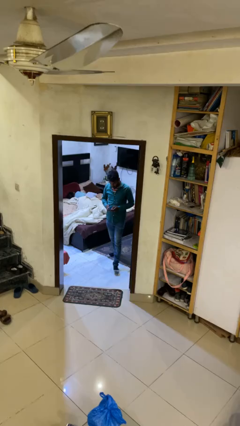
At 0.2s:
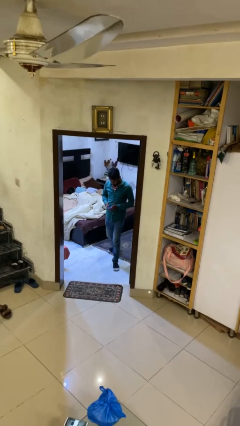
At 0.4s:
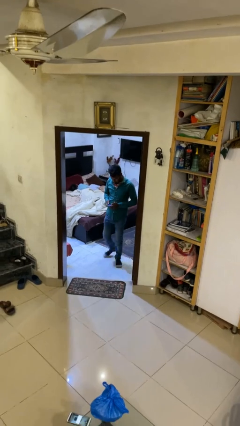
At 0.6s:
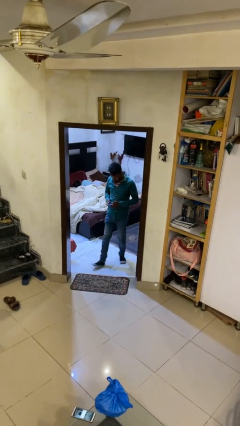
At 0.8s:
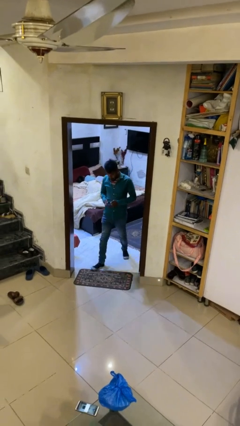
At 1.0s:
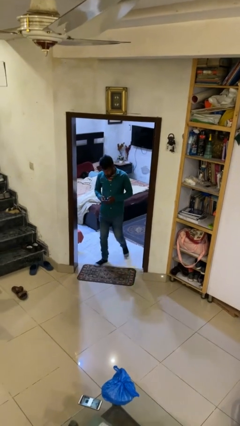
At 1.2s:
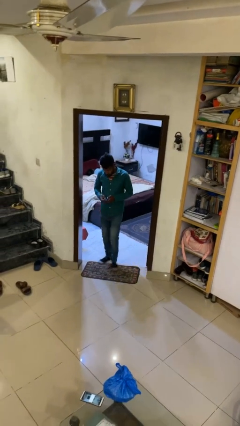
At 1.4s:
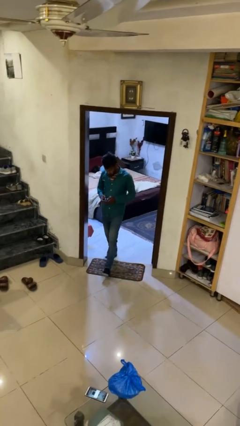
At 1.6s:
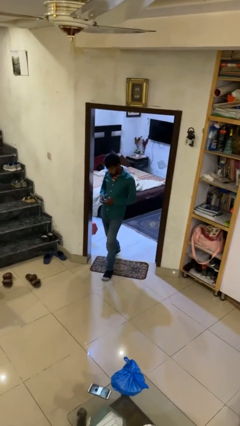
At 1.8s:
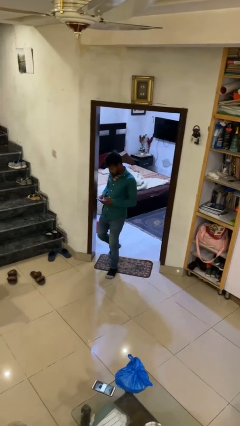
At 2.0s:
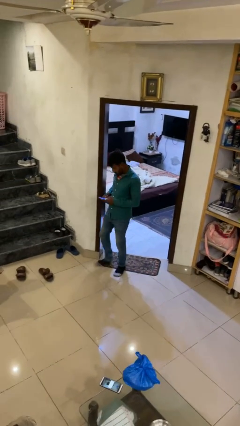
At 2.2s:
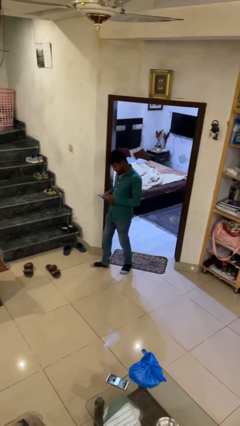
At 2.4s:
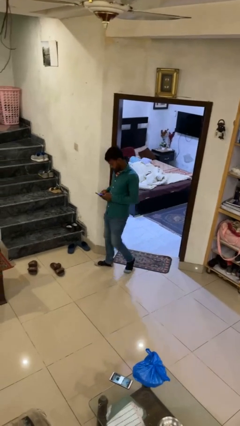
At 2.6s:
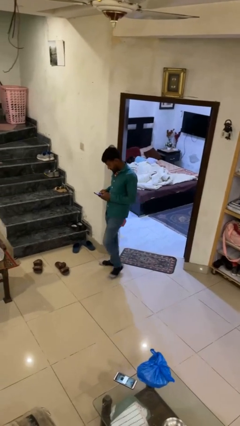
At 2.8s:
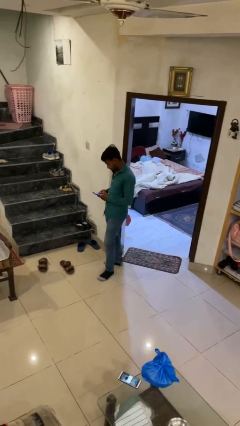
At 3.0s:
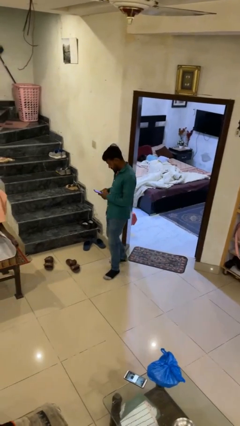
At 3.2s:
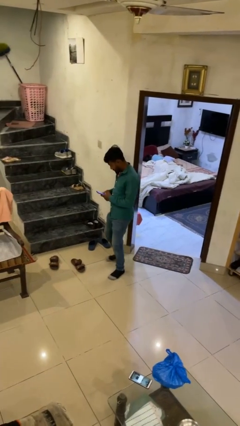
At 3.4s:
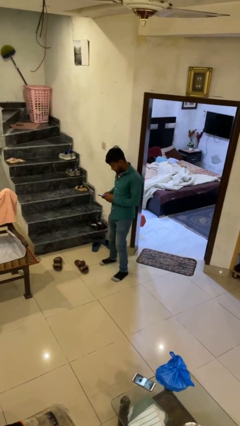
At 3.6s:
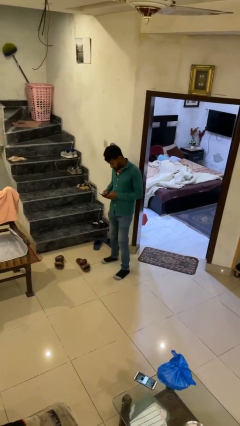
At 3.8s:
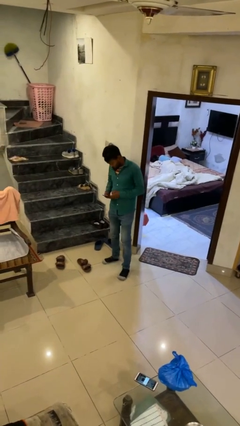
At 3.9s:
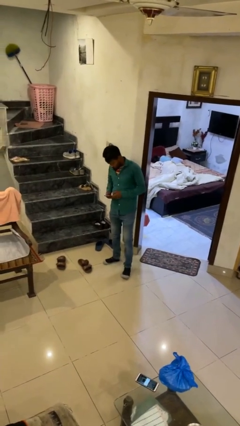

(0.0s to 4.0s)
person enters scene through structure

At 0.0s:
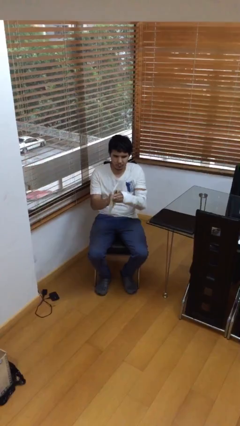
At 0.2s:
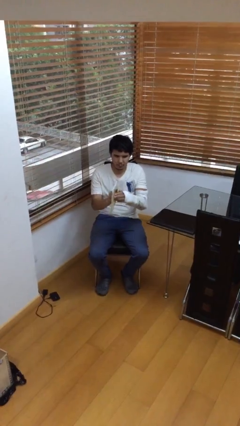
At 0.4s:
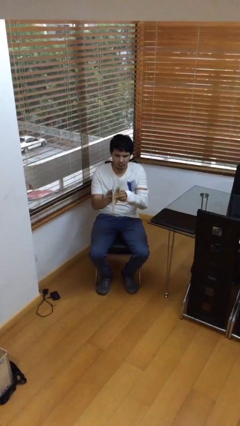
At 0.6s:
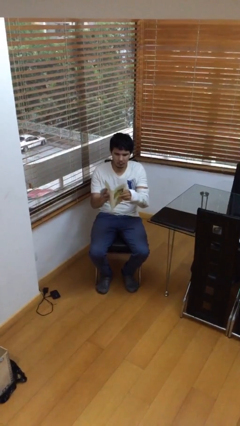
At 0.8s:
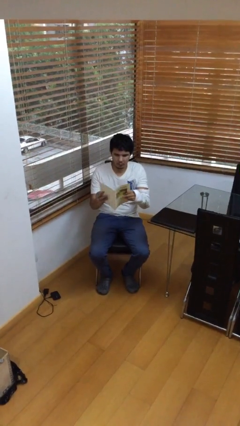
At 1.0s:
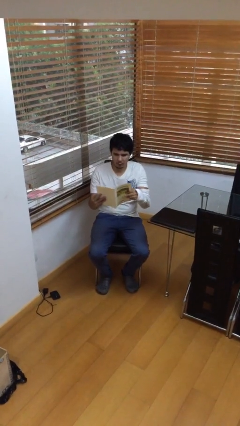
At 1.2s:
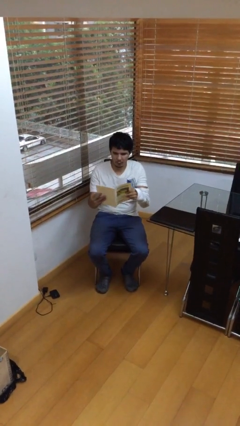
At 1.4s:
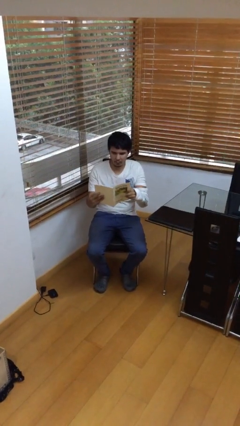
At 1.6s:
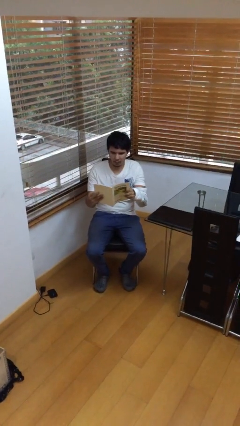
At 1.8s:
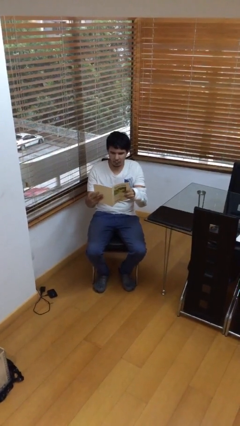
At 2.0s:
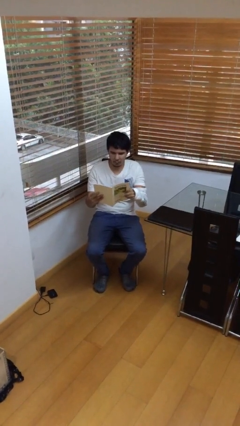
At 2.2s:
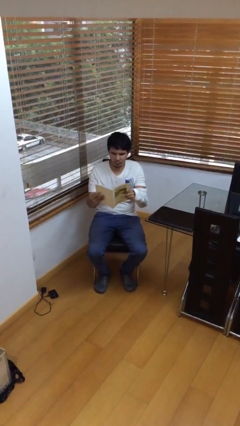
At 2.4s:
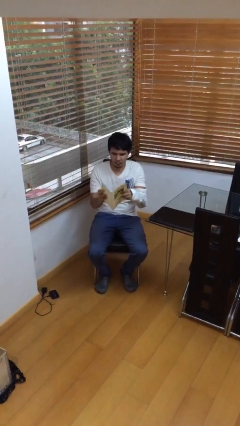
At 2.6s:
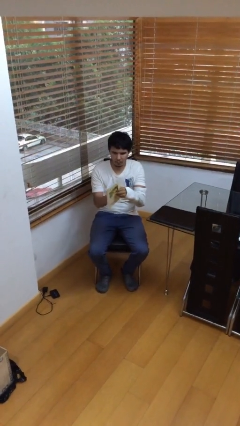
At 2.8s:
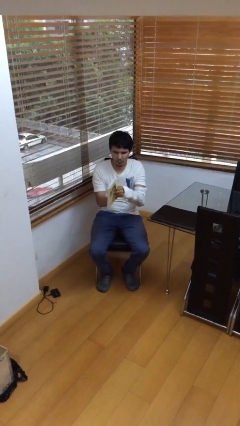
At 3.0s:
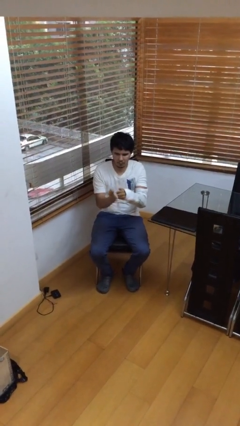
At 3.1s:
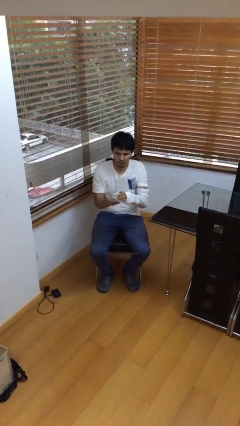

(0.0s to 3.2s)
person reads document

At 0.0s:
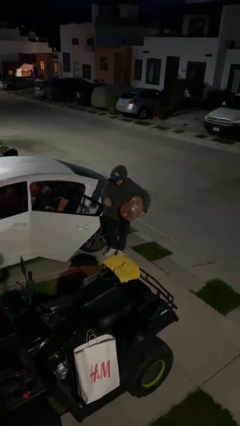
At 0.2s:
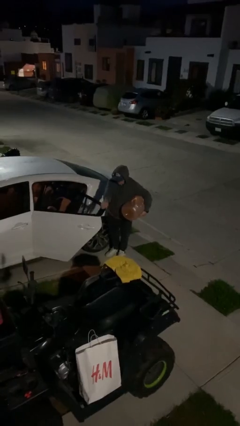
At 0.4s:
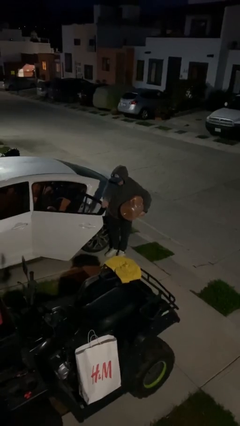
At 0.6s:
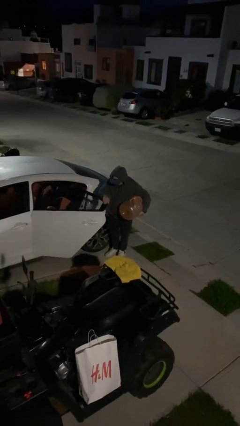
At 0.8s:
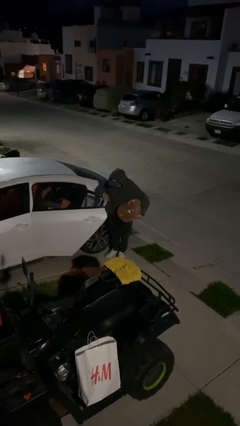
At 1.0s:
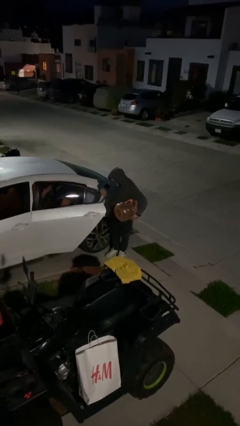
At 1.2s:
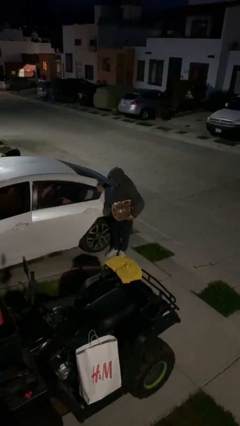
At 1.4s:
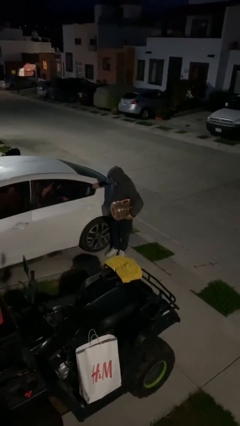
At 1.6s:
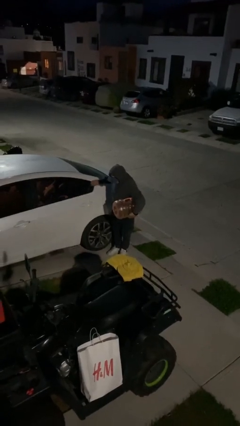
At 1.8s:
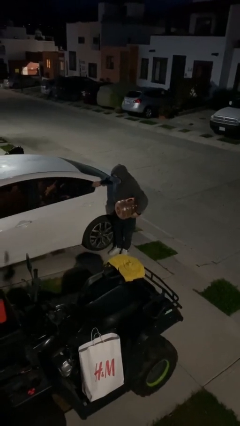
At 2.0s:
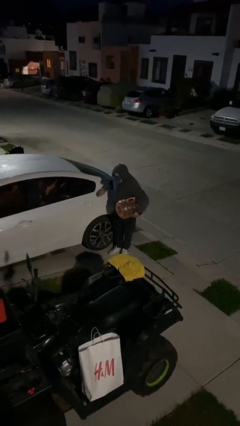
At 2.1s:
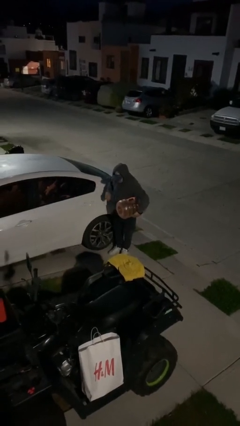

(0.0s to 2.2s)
person closes car door

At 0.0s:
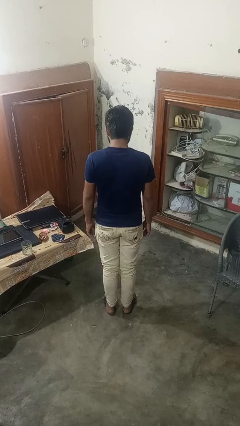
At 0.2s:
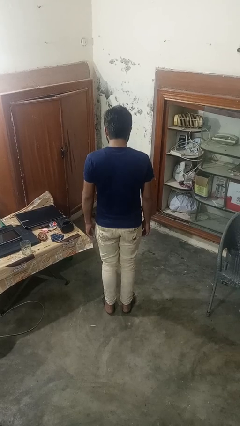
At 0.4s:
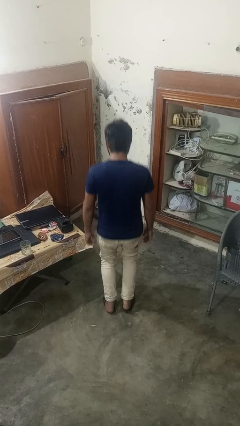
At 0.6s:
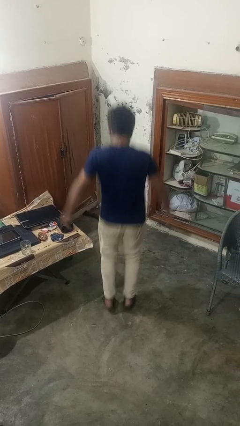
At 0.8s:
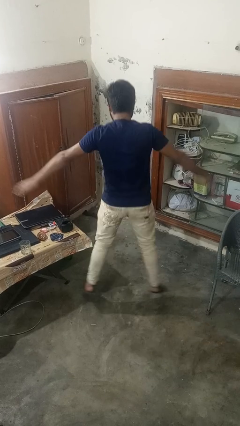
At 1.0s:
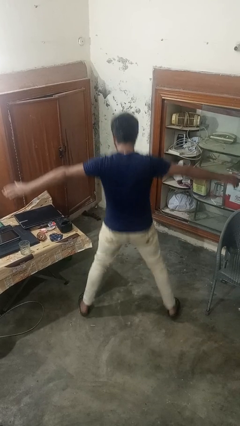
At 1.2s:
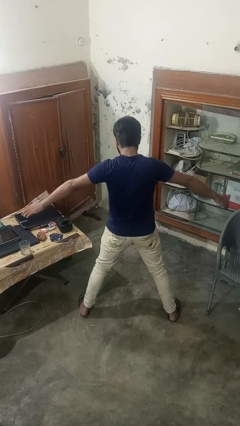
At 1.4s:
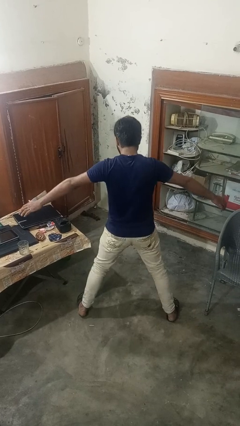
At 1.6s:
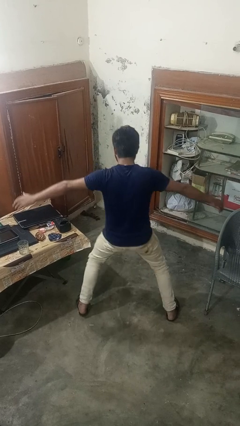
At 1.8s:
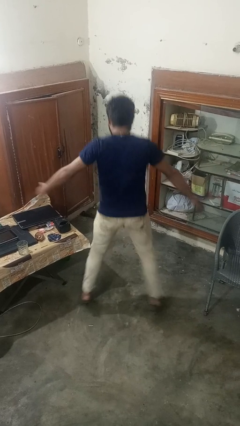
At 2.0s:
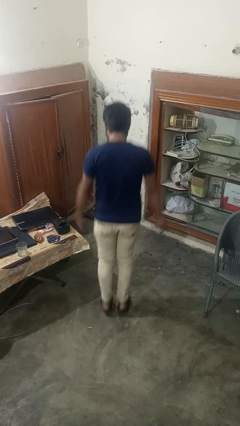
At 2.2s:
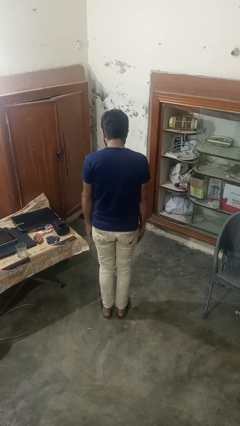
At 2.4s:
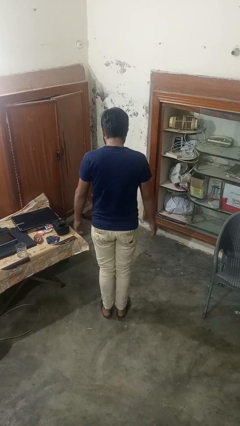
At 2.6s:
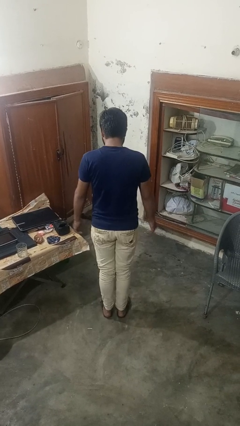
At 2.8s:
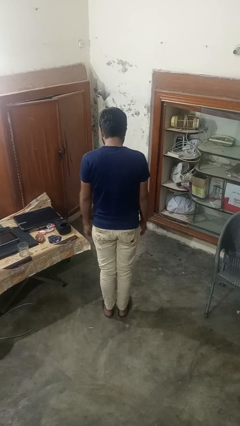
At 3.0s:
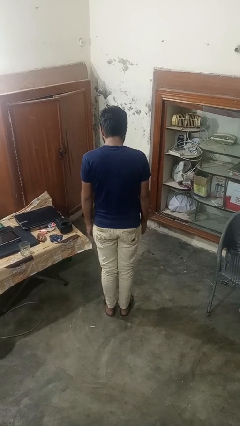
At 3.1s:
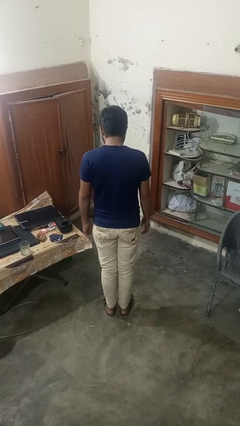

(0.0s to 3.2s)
person exercises with jumping jacks

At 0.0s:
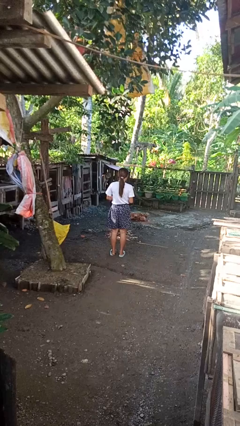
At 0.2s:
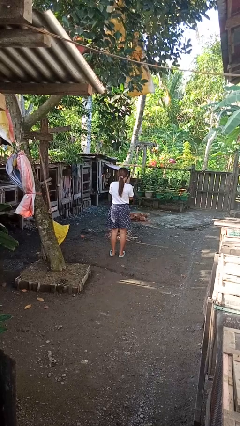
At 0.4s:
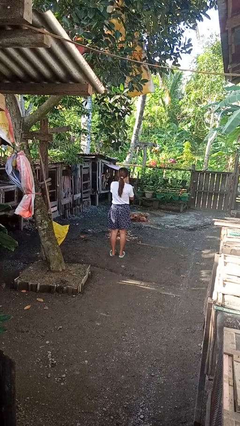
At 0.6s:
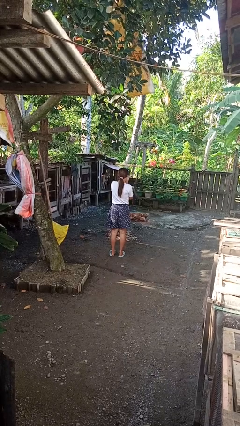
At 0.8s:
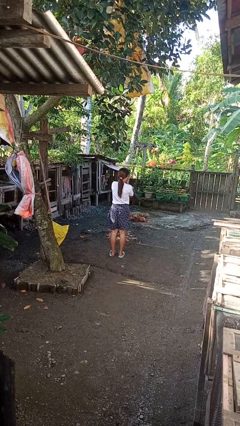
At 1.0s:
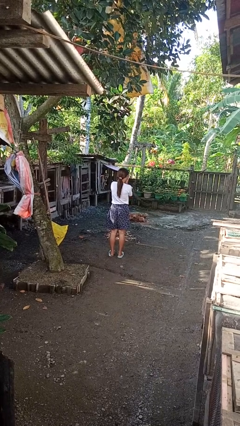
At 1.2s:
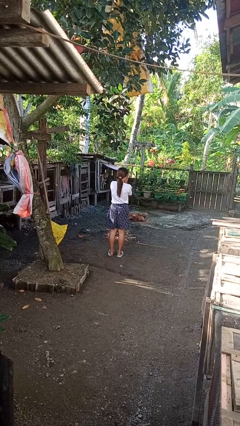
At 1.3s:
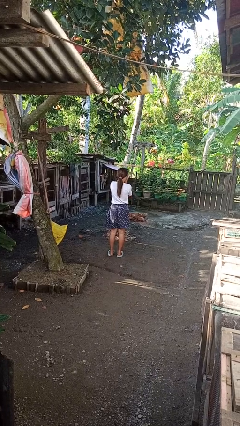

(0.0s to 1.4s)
person blows into hands

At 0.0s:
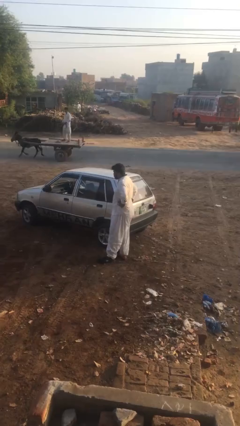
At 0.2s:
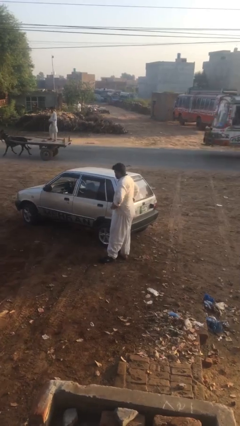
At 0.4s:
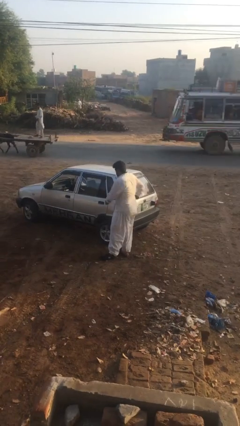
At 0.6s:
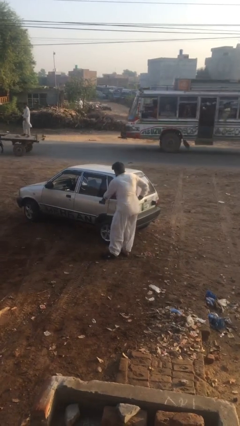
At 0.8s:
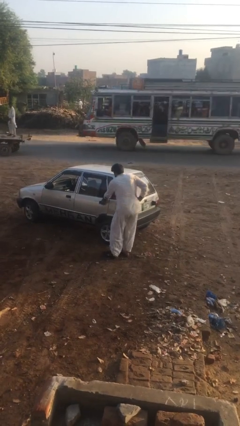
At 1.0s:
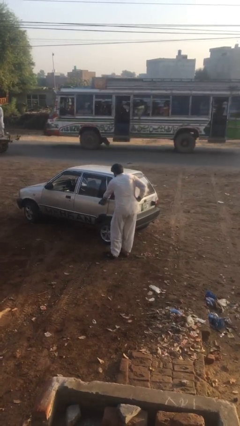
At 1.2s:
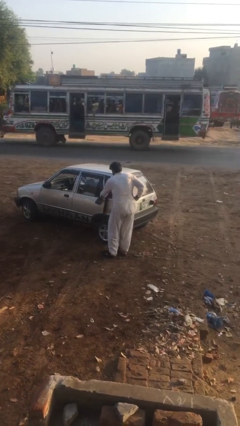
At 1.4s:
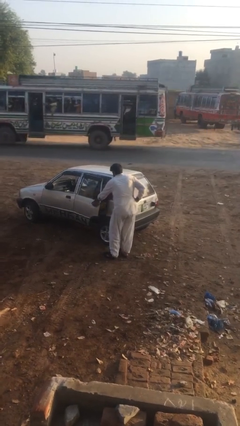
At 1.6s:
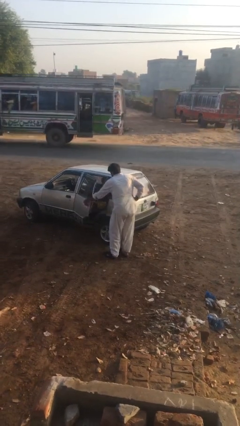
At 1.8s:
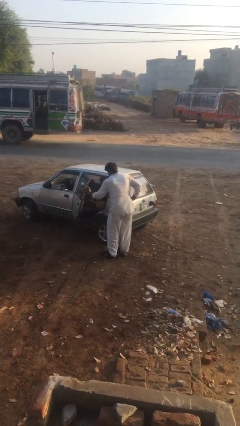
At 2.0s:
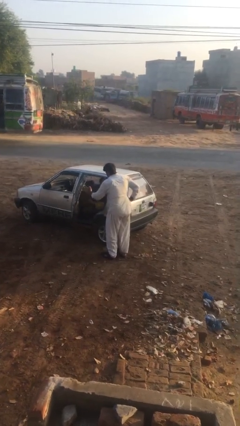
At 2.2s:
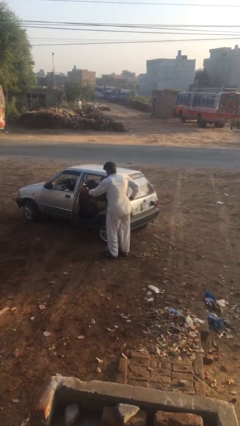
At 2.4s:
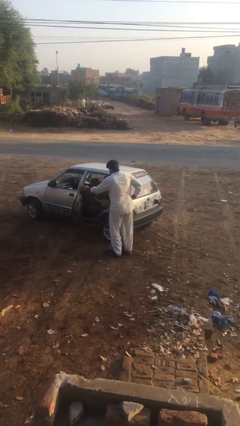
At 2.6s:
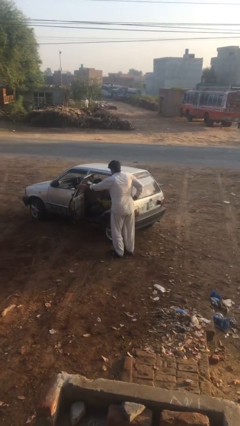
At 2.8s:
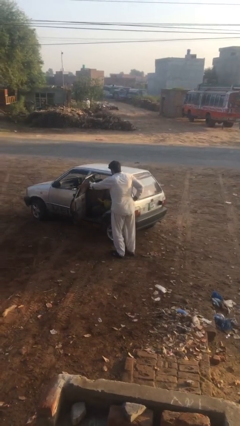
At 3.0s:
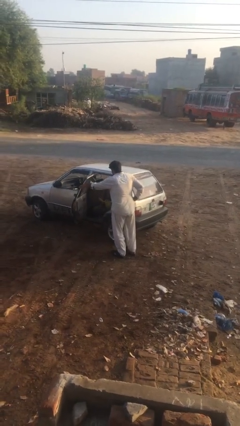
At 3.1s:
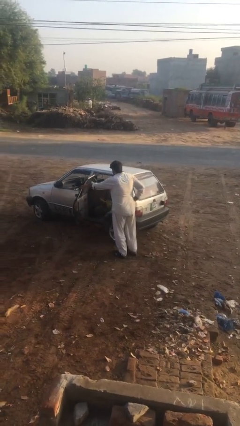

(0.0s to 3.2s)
person opens car door

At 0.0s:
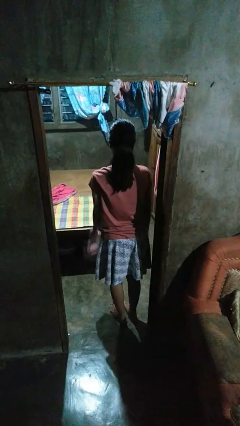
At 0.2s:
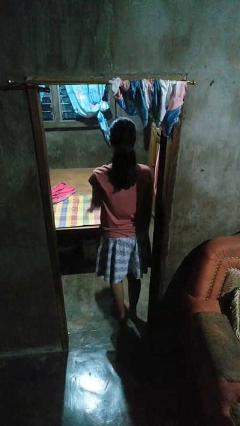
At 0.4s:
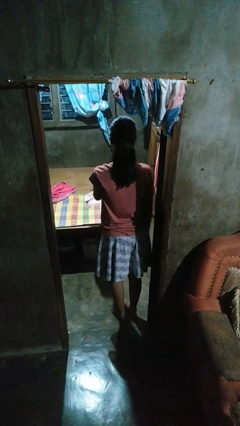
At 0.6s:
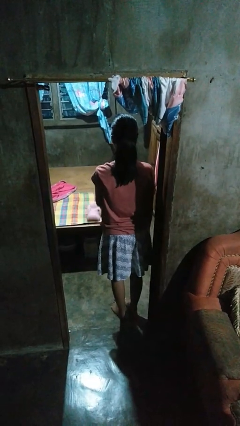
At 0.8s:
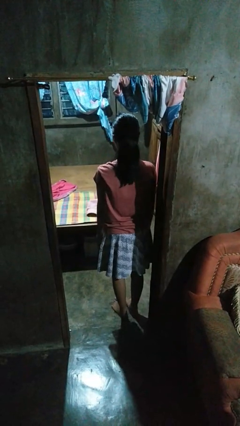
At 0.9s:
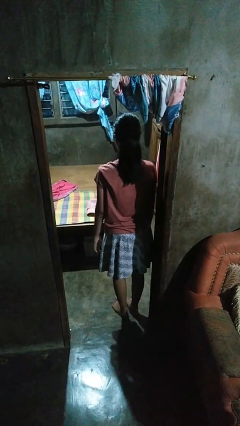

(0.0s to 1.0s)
person throws object on bed
